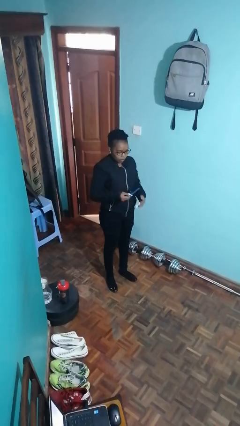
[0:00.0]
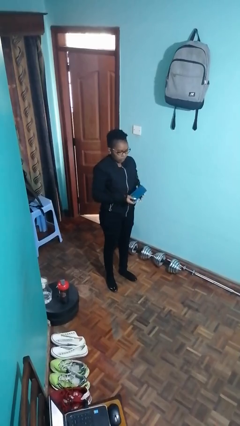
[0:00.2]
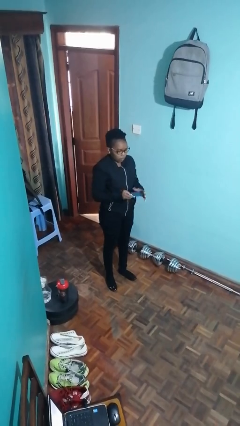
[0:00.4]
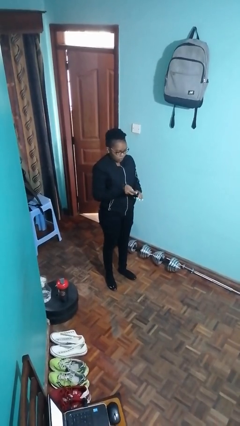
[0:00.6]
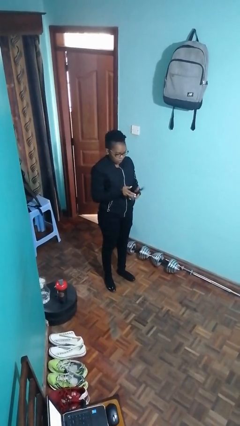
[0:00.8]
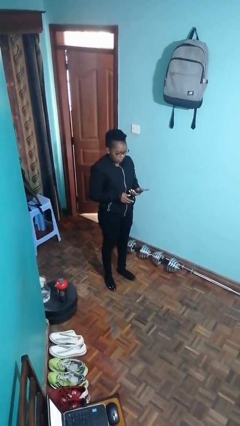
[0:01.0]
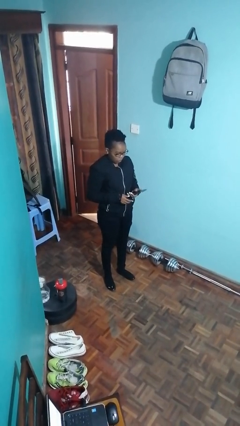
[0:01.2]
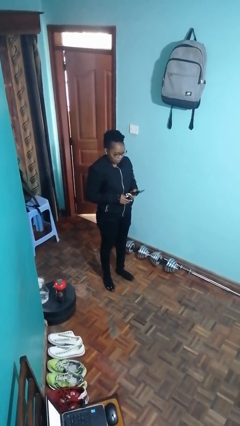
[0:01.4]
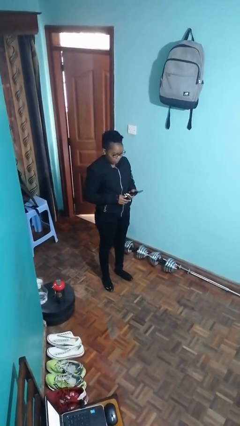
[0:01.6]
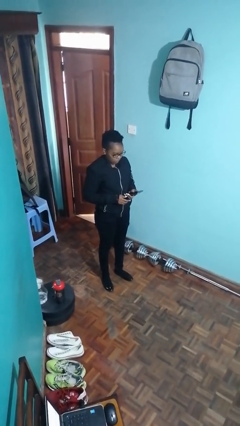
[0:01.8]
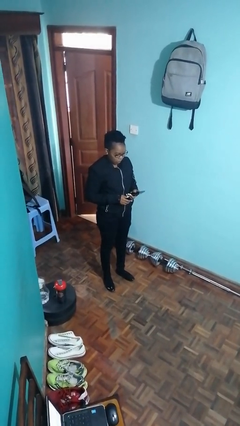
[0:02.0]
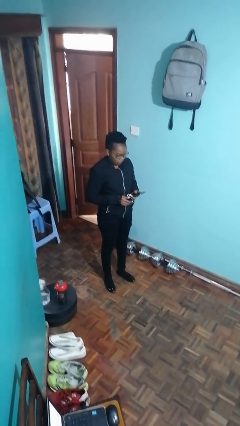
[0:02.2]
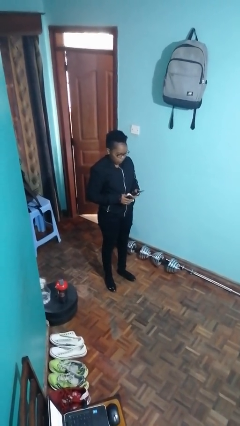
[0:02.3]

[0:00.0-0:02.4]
person takes phone from pocket

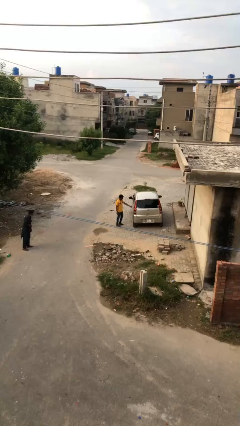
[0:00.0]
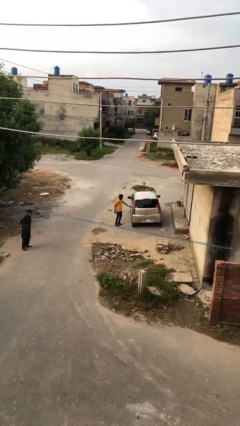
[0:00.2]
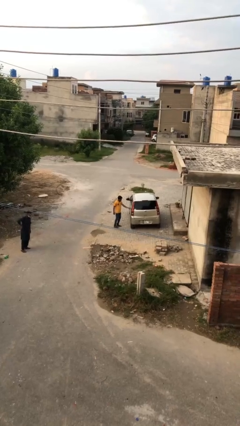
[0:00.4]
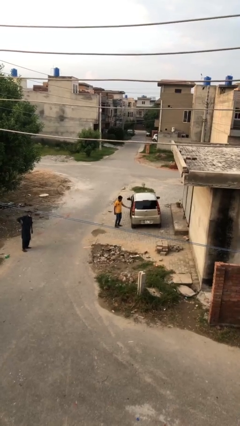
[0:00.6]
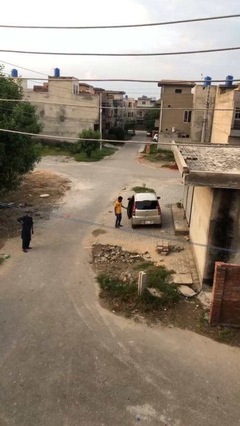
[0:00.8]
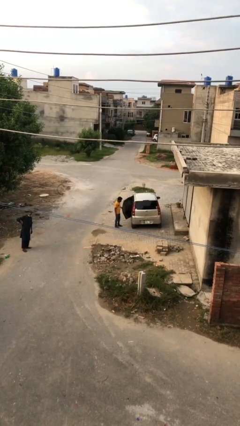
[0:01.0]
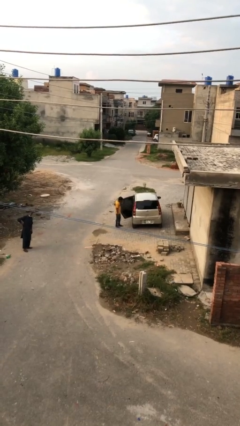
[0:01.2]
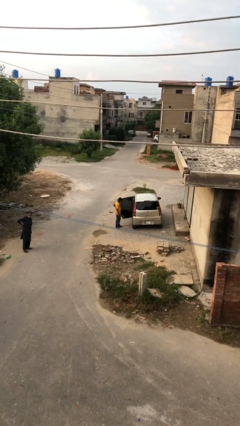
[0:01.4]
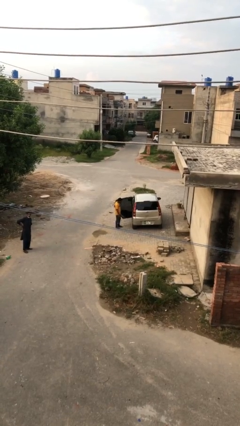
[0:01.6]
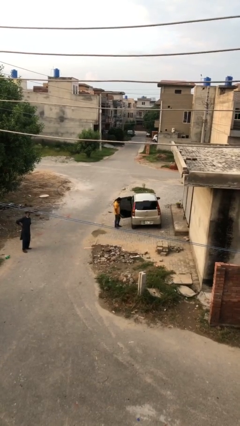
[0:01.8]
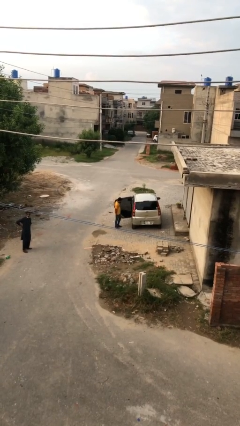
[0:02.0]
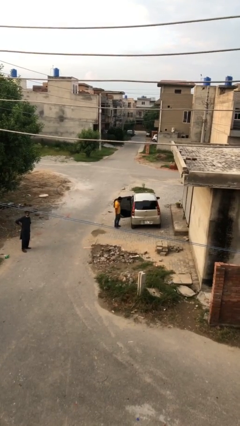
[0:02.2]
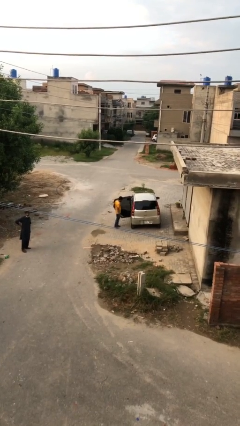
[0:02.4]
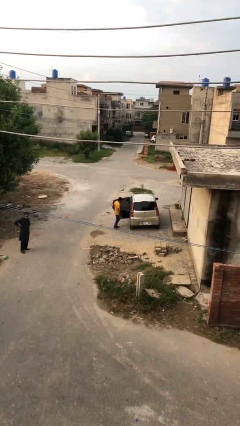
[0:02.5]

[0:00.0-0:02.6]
person opens car door

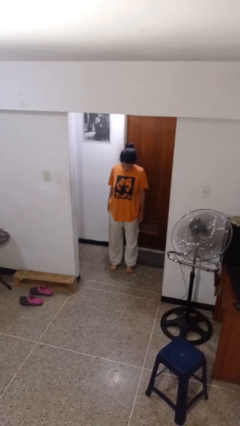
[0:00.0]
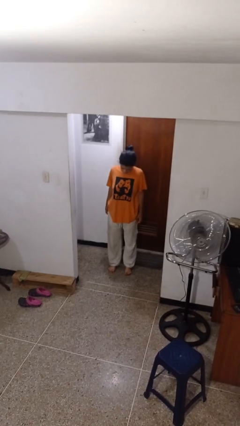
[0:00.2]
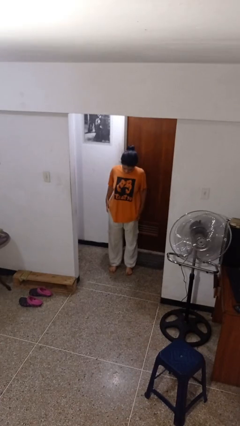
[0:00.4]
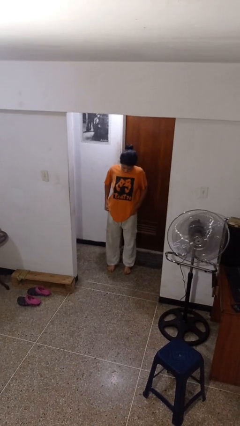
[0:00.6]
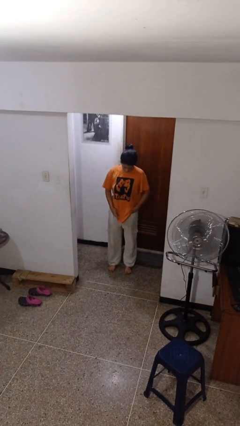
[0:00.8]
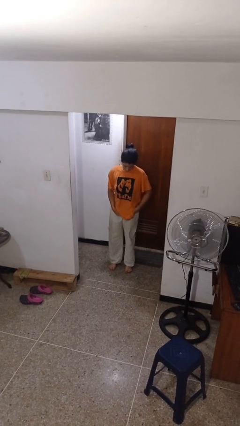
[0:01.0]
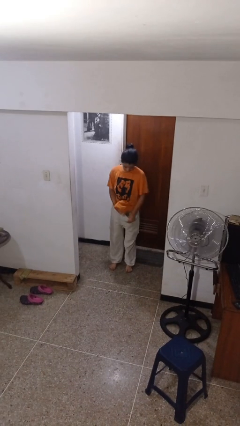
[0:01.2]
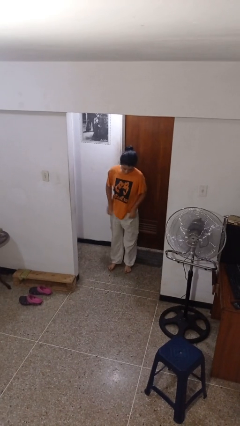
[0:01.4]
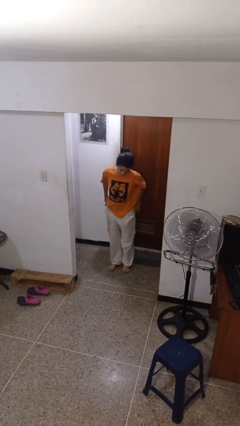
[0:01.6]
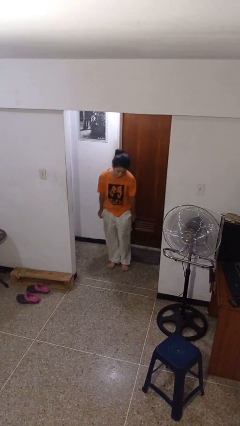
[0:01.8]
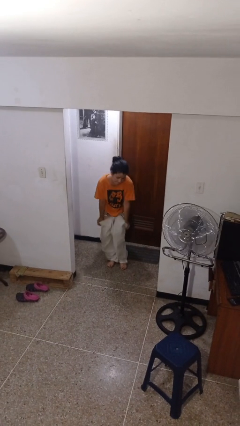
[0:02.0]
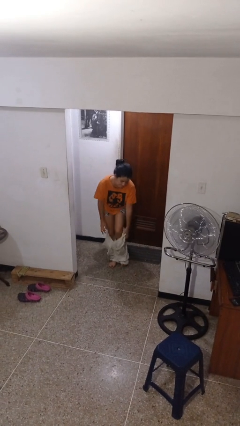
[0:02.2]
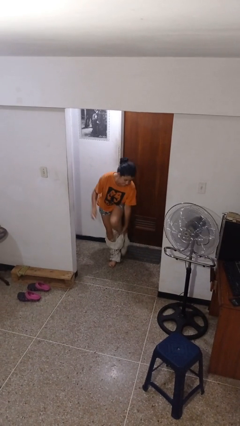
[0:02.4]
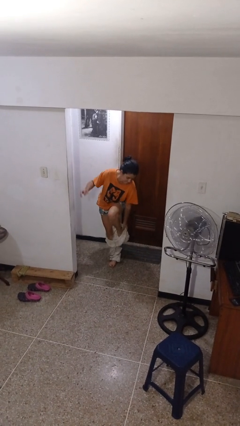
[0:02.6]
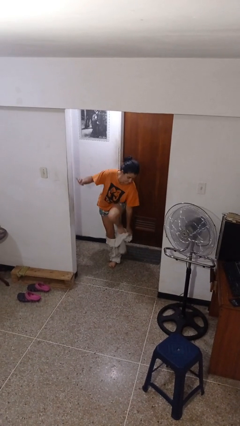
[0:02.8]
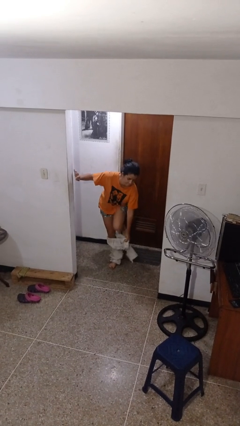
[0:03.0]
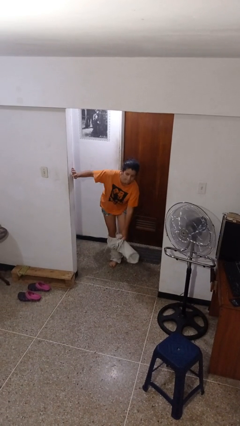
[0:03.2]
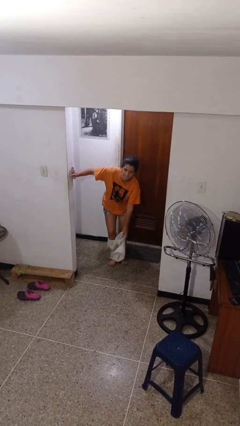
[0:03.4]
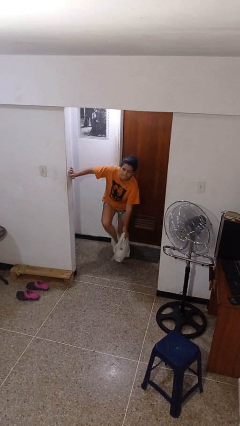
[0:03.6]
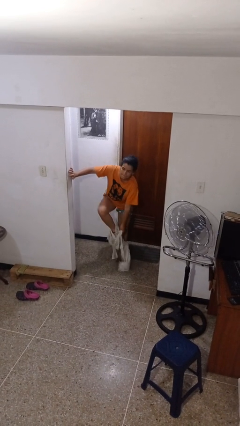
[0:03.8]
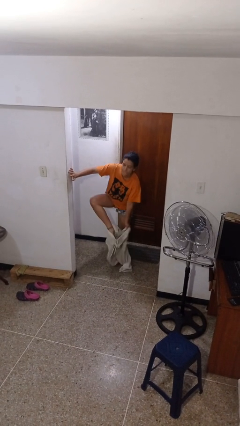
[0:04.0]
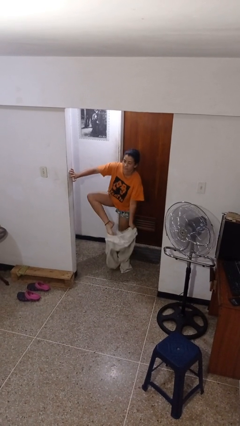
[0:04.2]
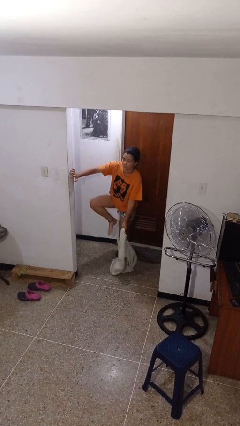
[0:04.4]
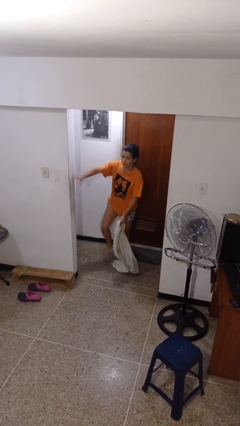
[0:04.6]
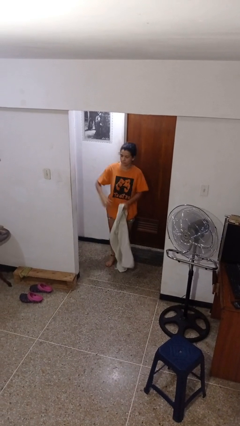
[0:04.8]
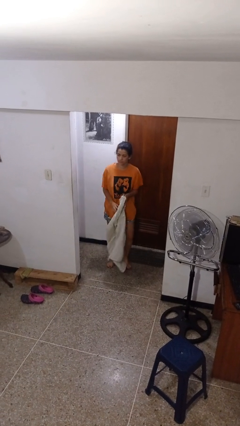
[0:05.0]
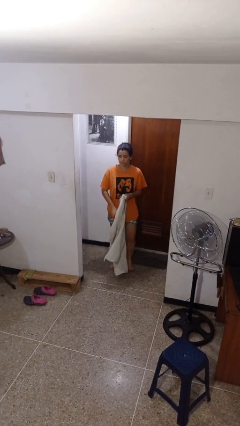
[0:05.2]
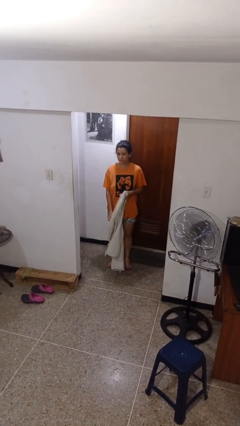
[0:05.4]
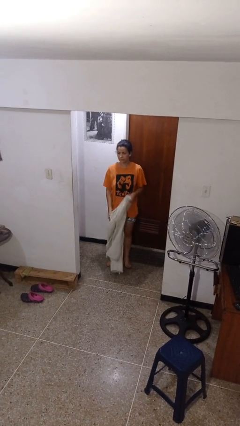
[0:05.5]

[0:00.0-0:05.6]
person takes off pants

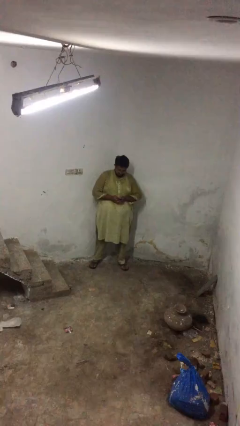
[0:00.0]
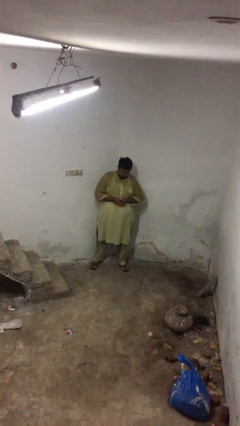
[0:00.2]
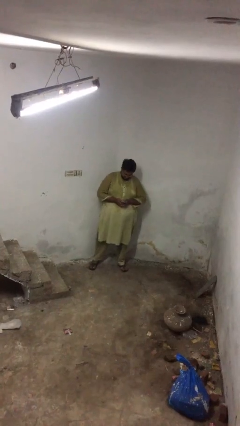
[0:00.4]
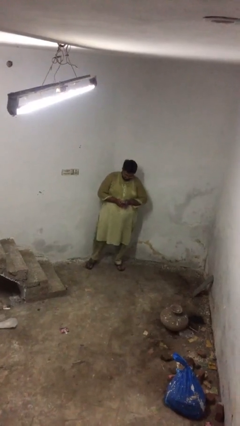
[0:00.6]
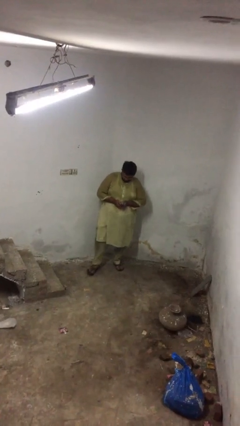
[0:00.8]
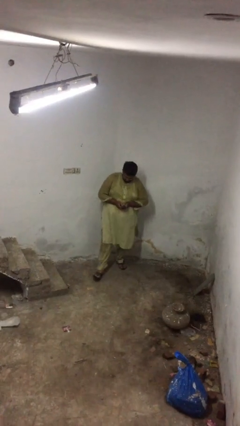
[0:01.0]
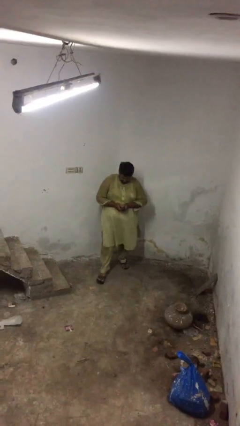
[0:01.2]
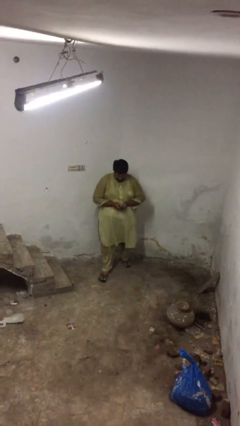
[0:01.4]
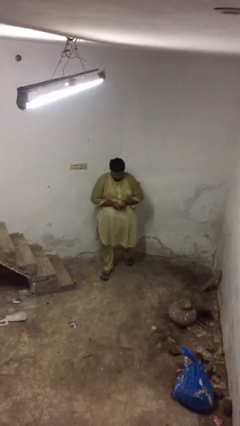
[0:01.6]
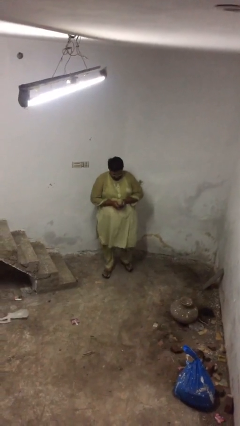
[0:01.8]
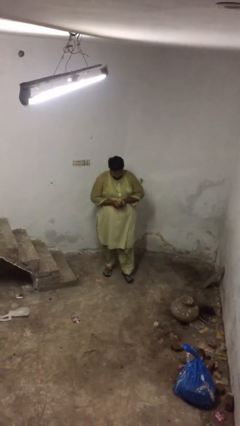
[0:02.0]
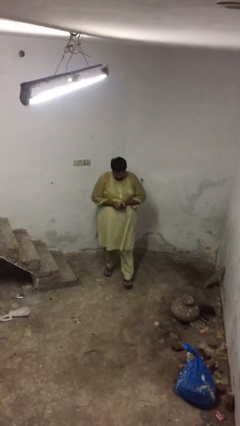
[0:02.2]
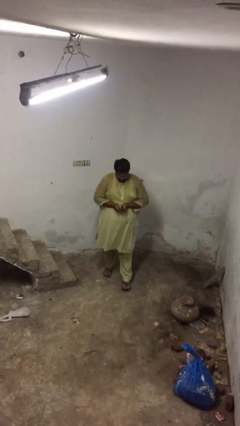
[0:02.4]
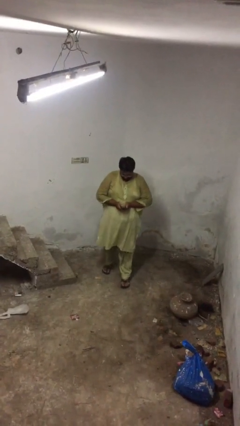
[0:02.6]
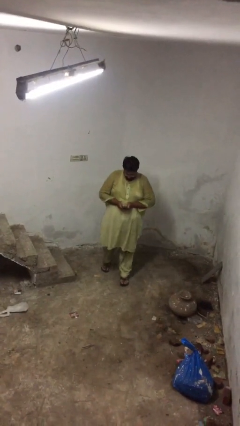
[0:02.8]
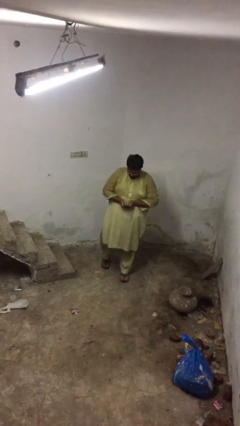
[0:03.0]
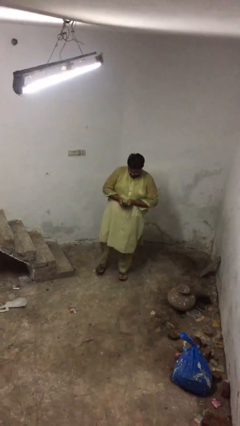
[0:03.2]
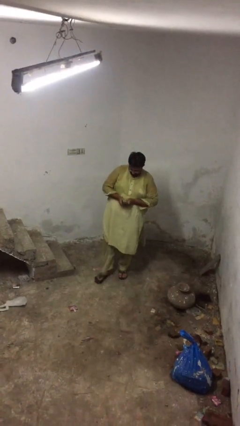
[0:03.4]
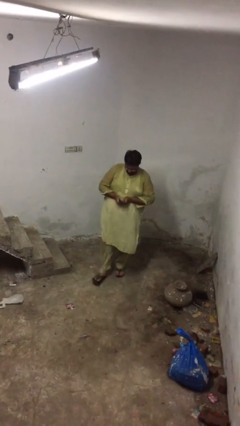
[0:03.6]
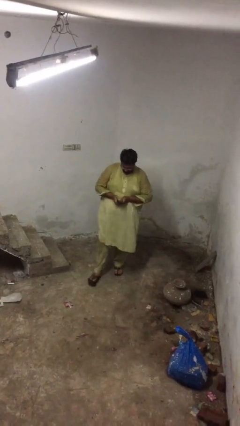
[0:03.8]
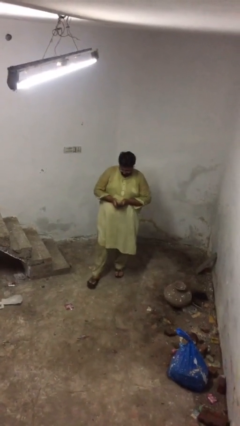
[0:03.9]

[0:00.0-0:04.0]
person texts on phone

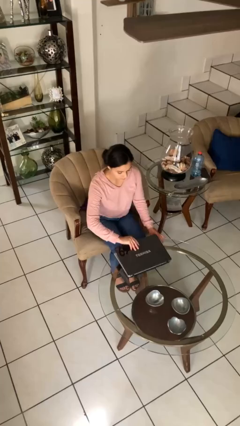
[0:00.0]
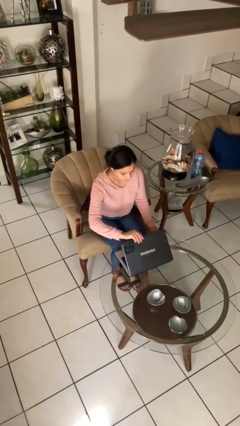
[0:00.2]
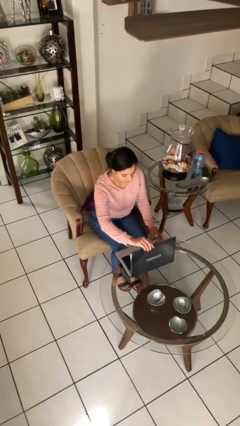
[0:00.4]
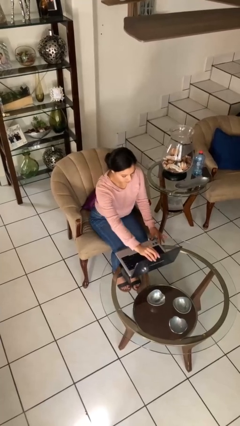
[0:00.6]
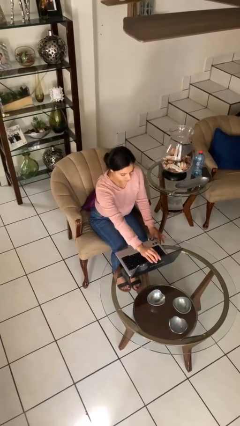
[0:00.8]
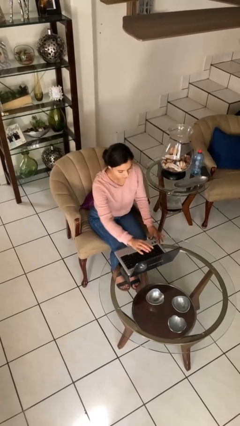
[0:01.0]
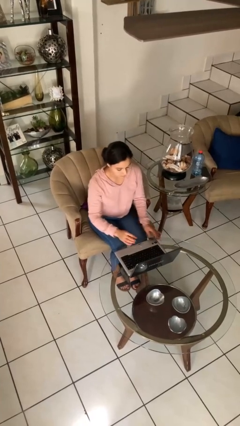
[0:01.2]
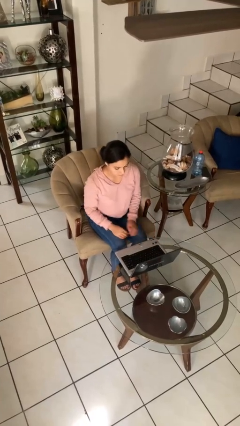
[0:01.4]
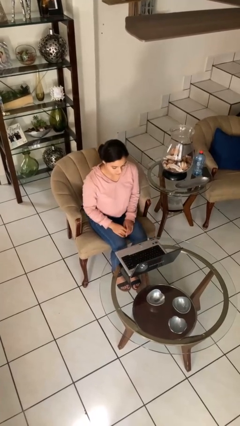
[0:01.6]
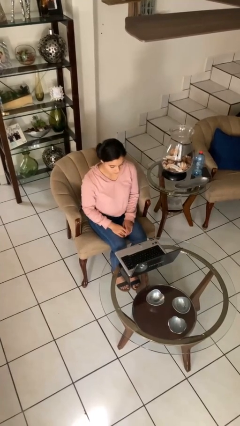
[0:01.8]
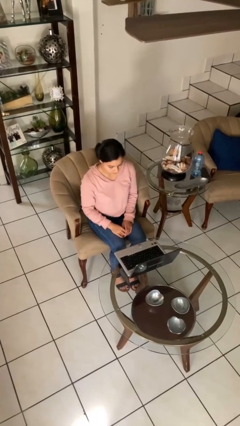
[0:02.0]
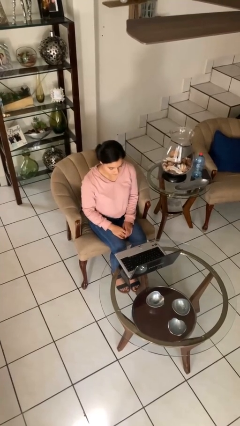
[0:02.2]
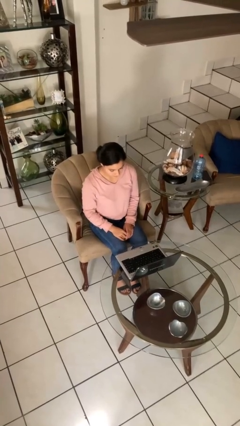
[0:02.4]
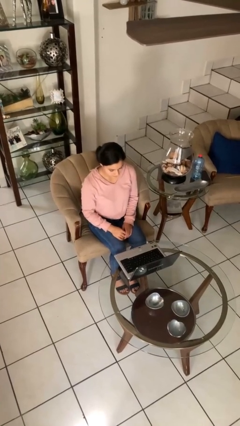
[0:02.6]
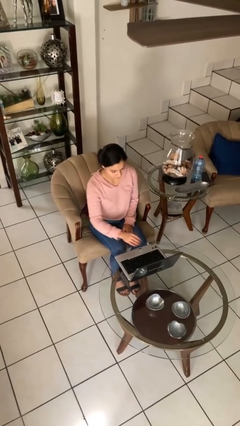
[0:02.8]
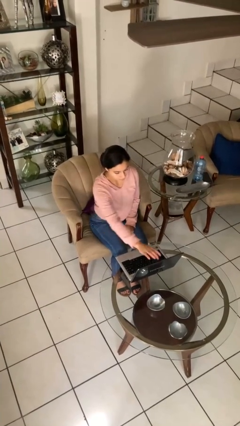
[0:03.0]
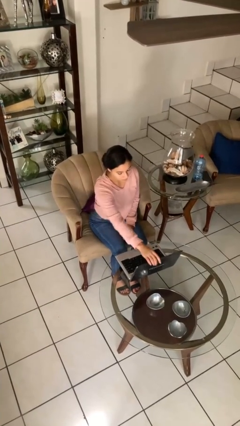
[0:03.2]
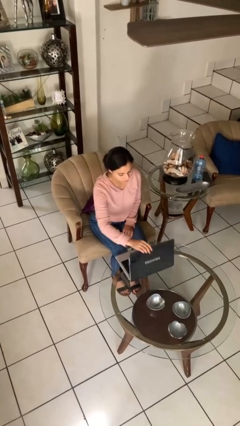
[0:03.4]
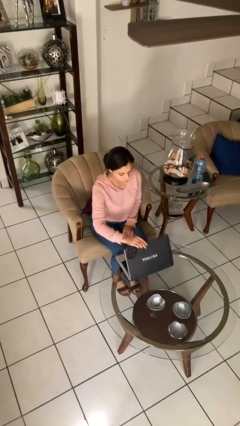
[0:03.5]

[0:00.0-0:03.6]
person opens laptop
